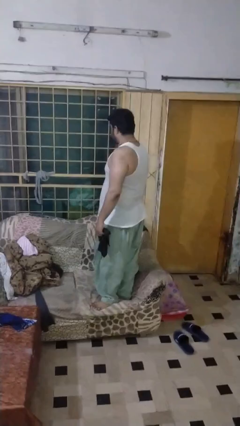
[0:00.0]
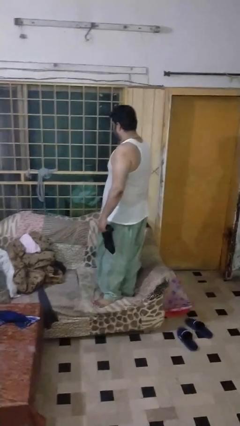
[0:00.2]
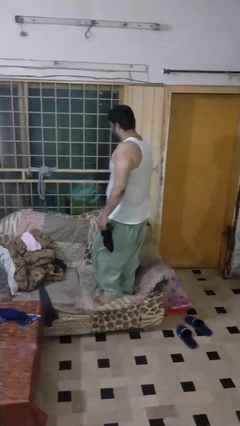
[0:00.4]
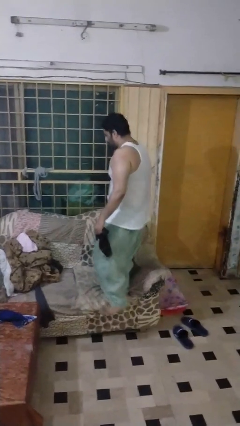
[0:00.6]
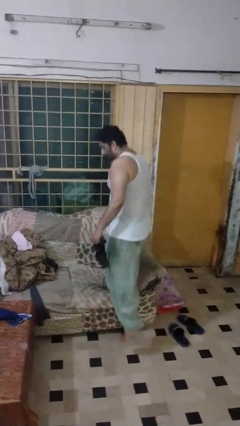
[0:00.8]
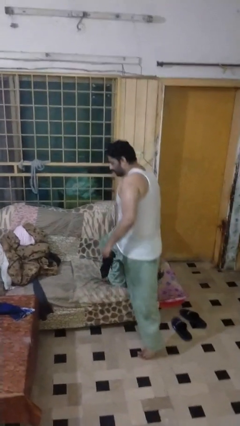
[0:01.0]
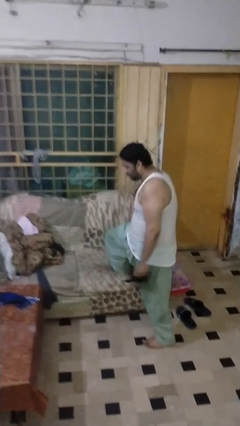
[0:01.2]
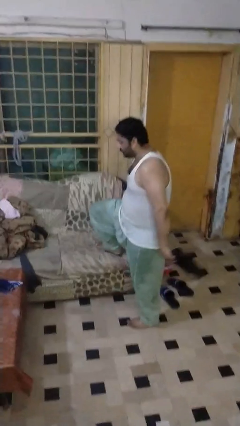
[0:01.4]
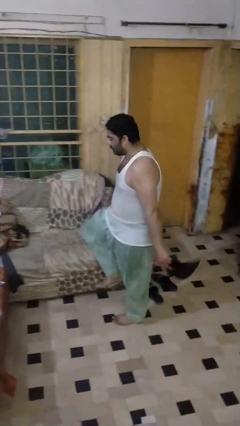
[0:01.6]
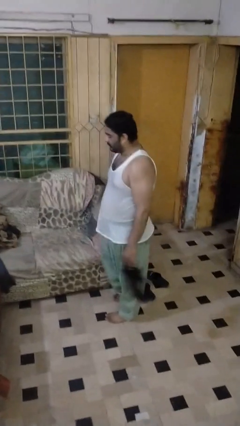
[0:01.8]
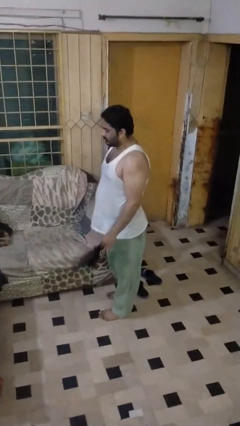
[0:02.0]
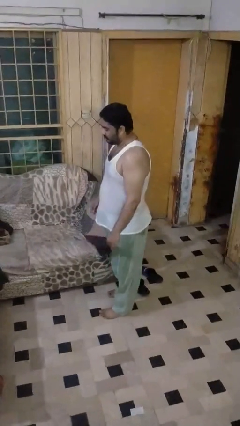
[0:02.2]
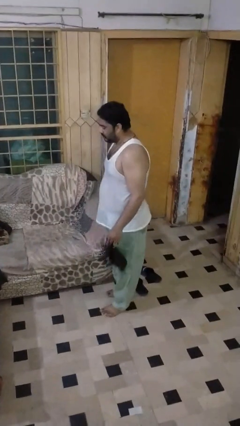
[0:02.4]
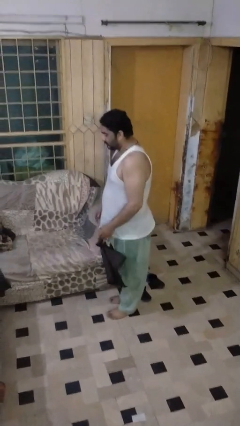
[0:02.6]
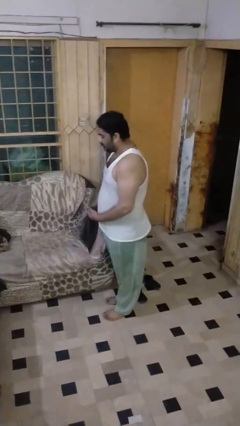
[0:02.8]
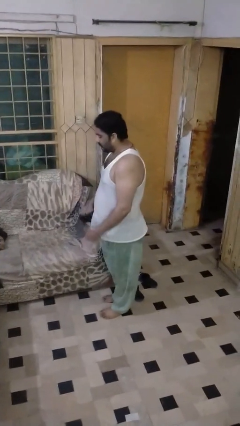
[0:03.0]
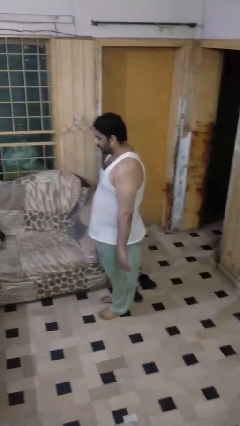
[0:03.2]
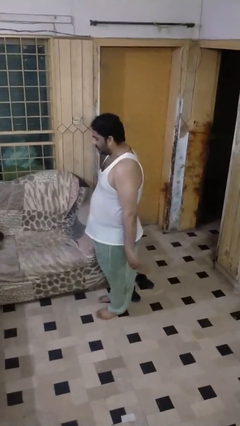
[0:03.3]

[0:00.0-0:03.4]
person climbs off couch

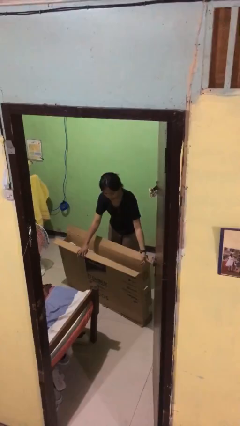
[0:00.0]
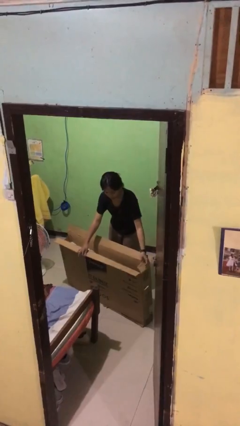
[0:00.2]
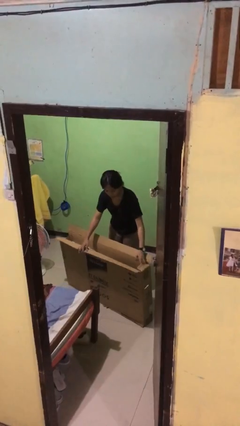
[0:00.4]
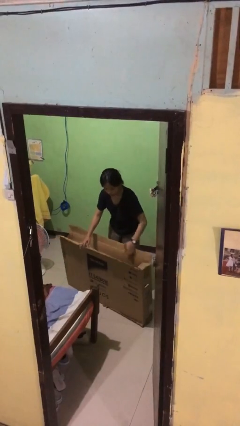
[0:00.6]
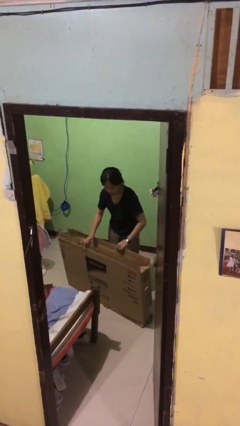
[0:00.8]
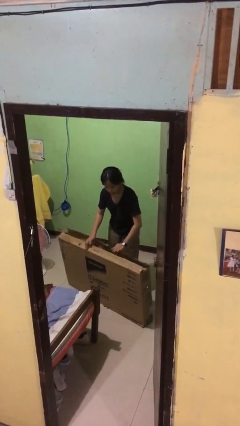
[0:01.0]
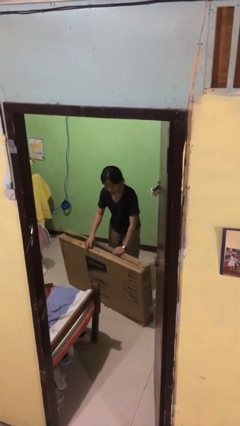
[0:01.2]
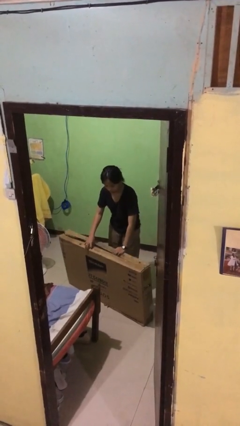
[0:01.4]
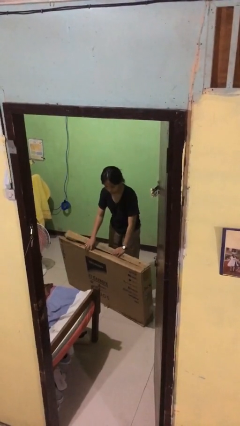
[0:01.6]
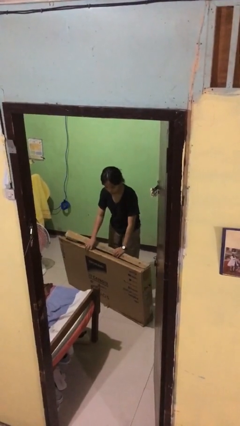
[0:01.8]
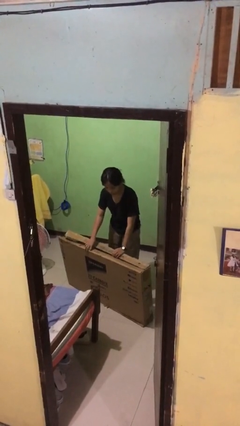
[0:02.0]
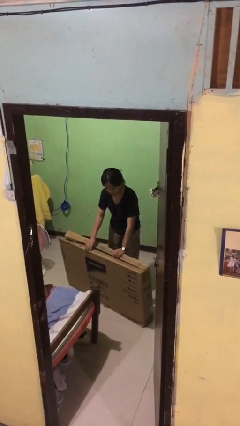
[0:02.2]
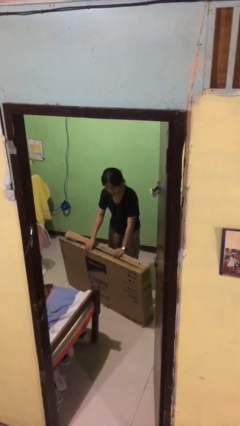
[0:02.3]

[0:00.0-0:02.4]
person closes box

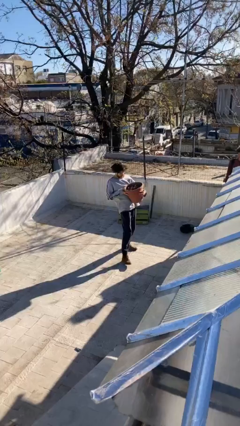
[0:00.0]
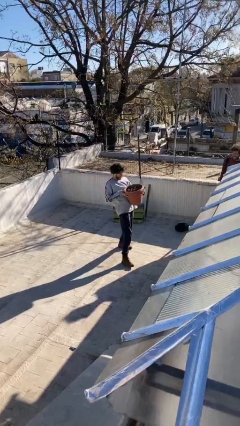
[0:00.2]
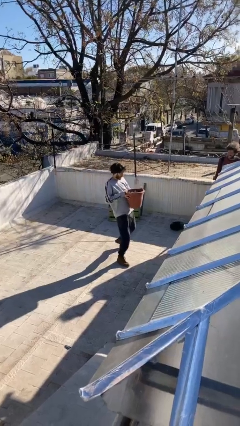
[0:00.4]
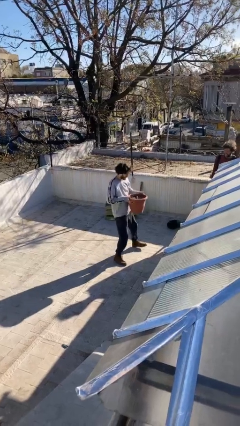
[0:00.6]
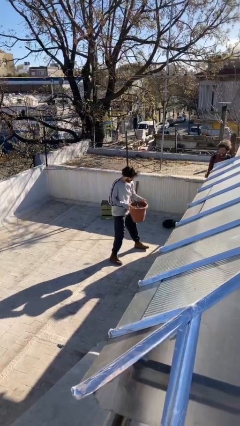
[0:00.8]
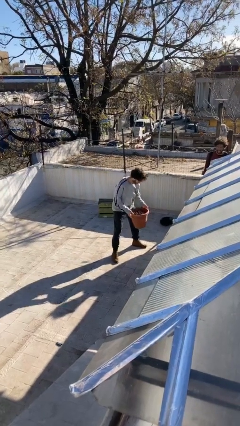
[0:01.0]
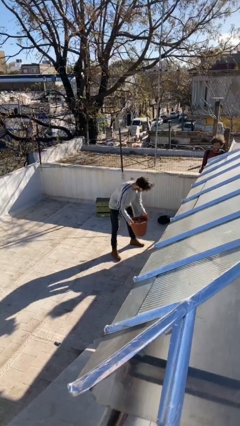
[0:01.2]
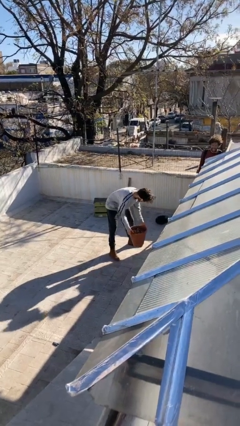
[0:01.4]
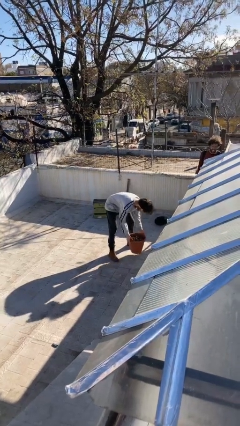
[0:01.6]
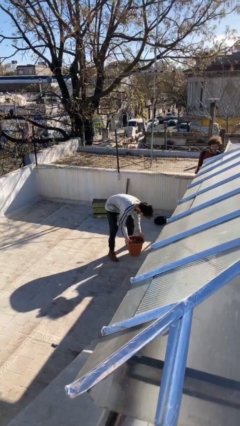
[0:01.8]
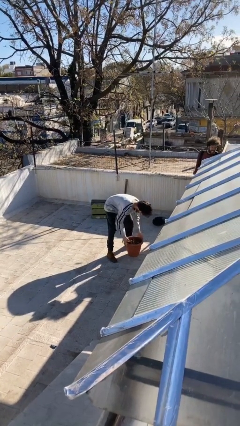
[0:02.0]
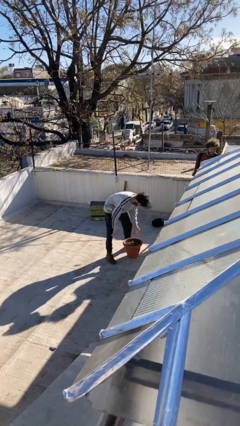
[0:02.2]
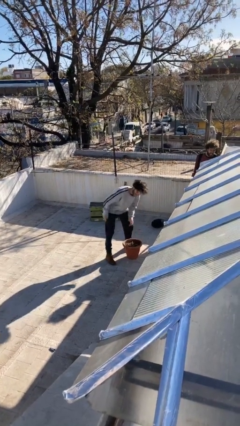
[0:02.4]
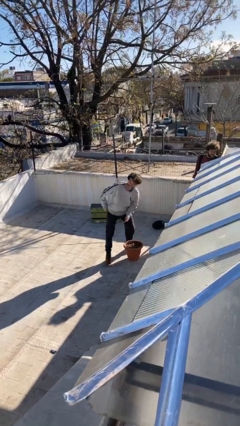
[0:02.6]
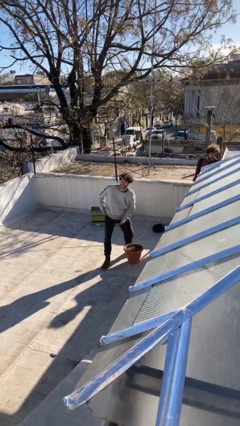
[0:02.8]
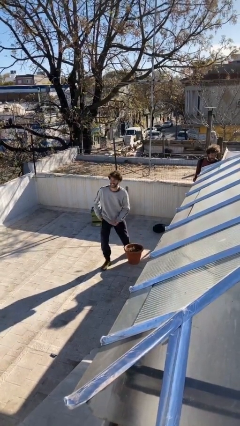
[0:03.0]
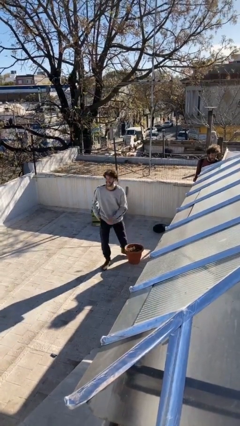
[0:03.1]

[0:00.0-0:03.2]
person puts down object on floor

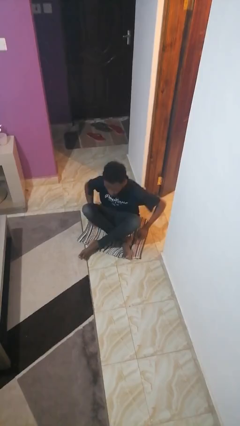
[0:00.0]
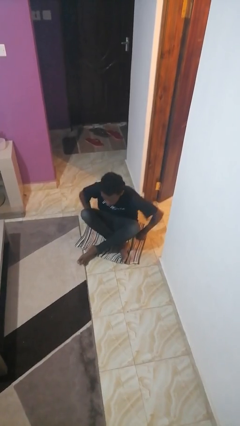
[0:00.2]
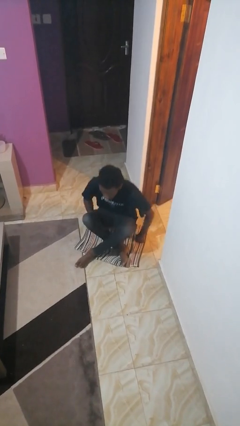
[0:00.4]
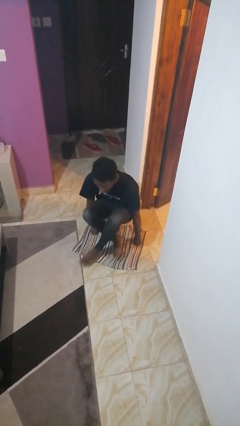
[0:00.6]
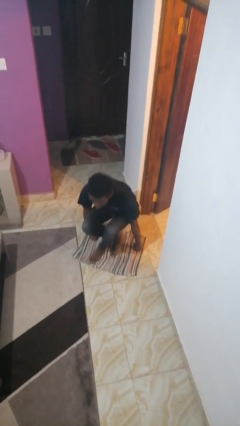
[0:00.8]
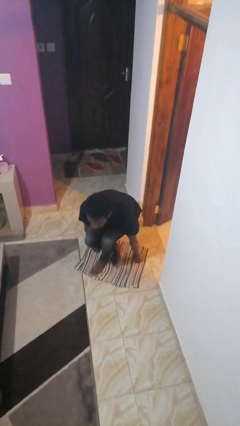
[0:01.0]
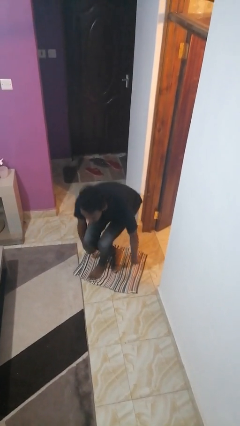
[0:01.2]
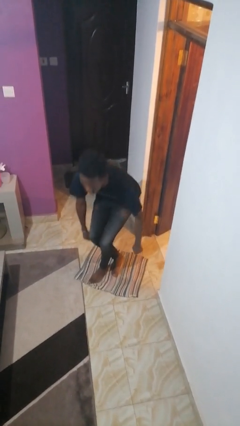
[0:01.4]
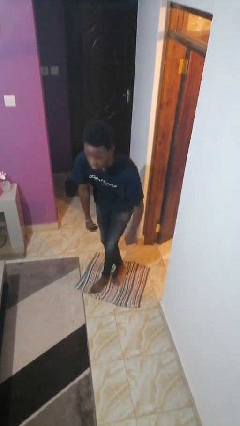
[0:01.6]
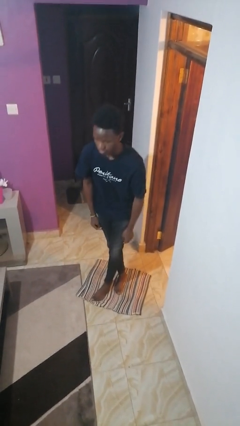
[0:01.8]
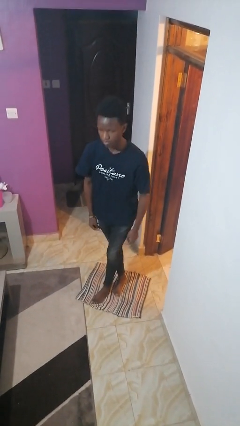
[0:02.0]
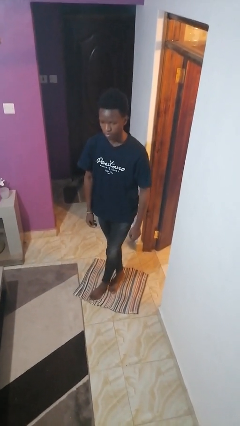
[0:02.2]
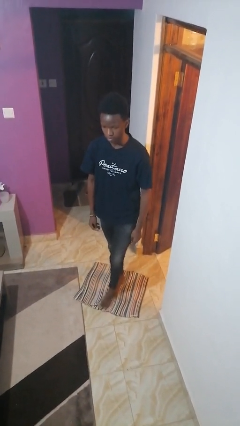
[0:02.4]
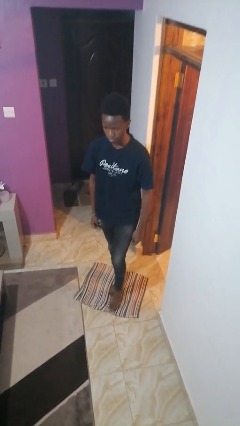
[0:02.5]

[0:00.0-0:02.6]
person stands up from floor

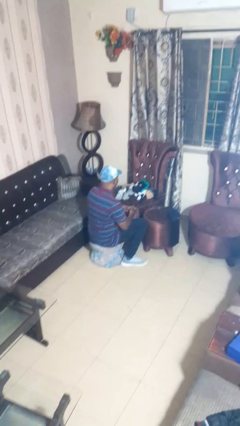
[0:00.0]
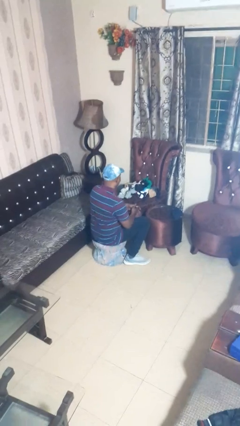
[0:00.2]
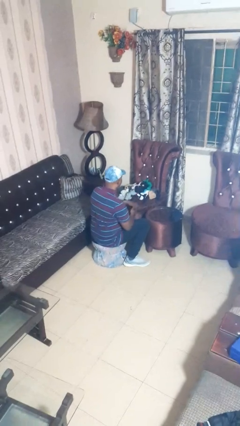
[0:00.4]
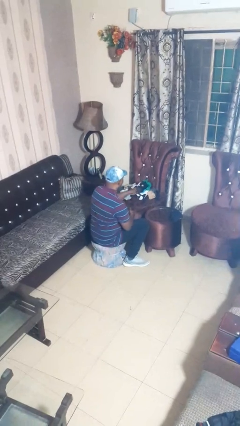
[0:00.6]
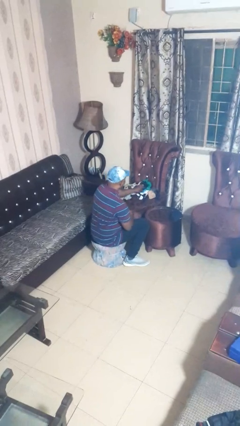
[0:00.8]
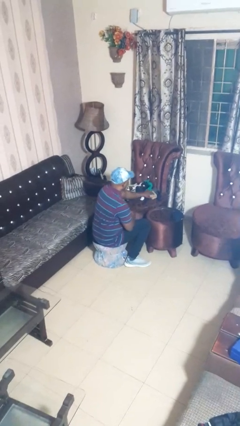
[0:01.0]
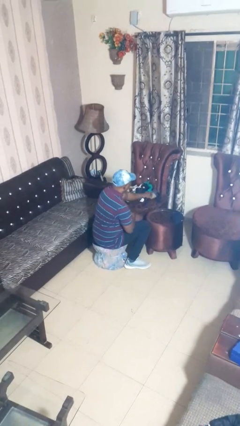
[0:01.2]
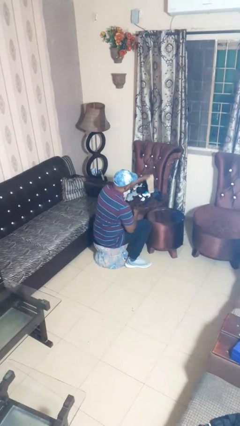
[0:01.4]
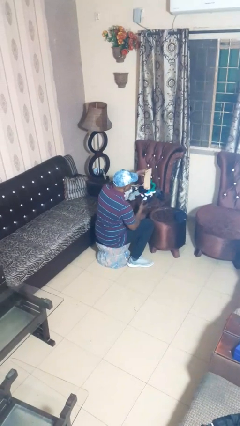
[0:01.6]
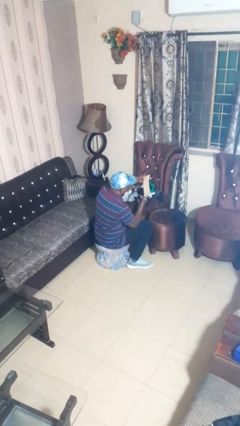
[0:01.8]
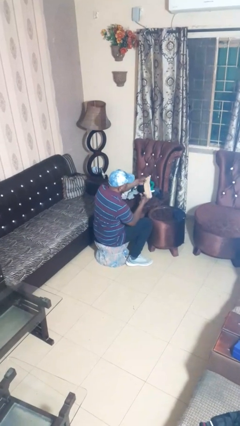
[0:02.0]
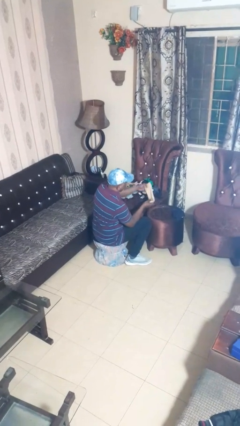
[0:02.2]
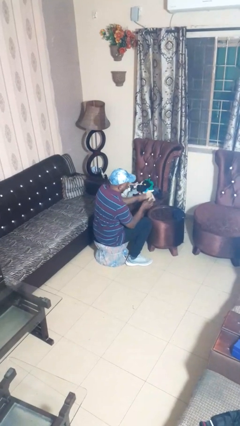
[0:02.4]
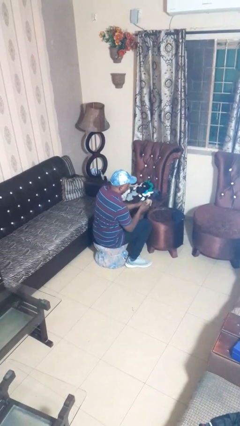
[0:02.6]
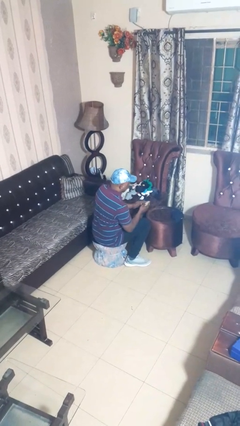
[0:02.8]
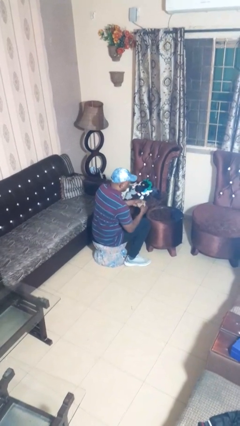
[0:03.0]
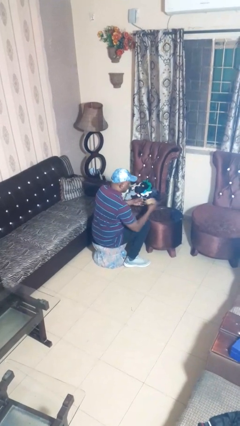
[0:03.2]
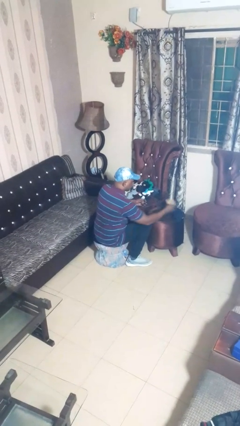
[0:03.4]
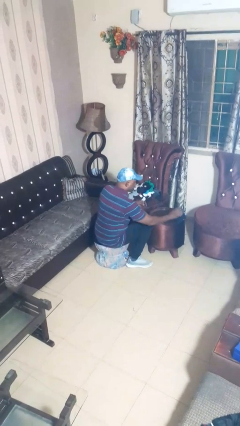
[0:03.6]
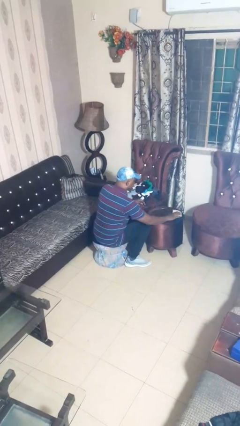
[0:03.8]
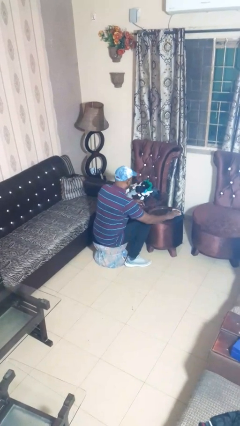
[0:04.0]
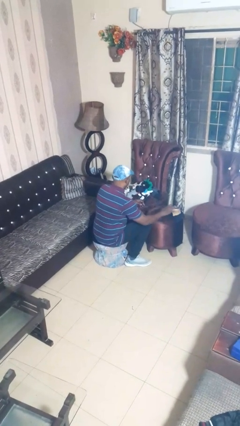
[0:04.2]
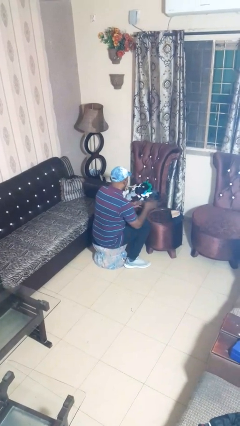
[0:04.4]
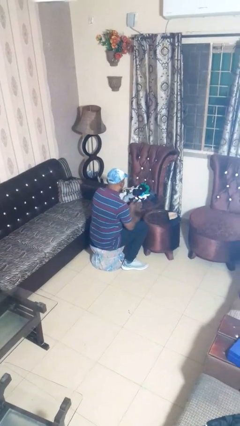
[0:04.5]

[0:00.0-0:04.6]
person folds socks

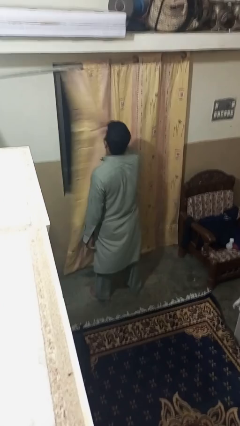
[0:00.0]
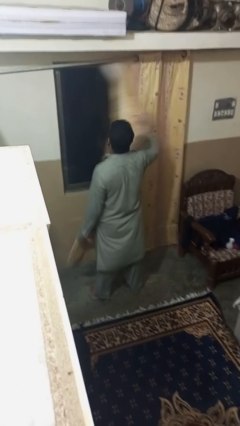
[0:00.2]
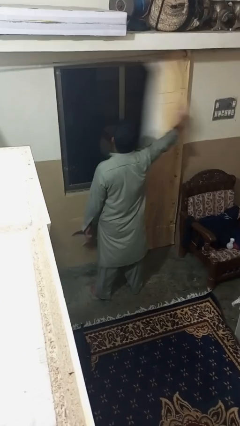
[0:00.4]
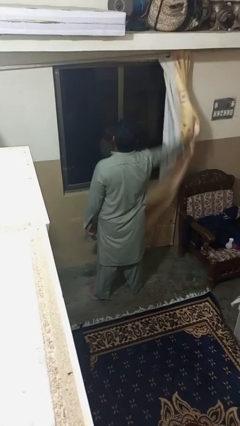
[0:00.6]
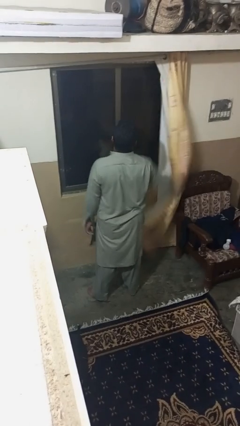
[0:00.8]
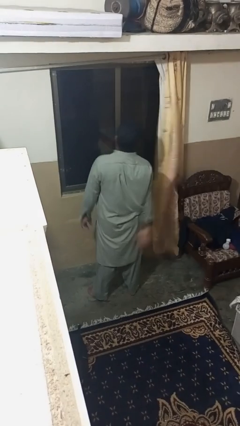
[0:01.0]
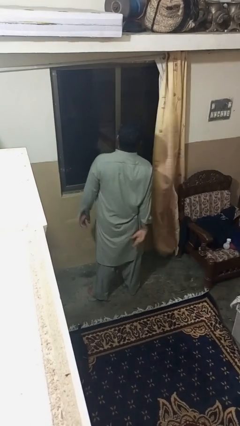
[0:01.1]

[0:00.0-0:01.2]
person opens curtains
